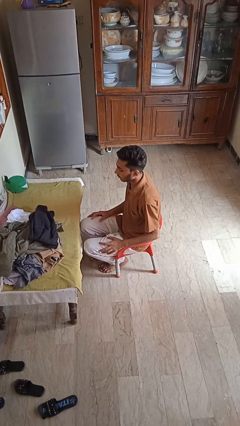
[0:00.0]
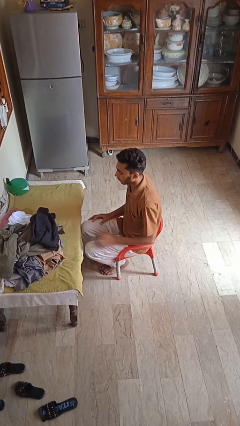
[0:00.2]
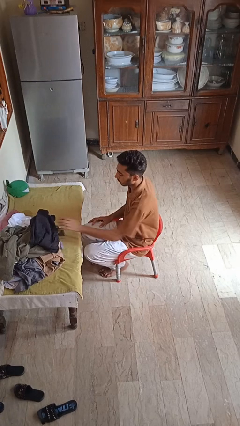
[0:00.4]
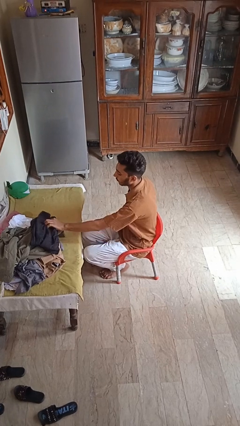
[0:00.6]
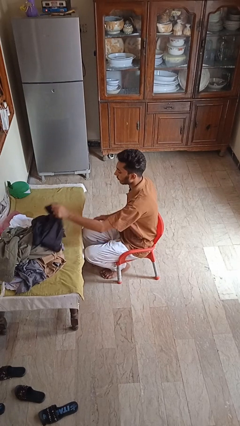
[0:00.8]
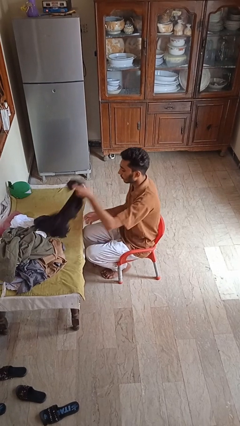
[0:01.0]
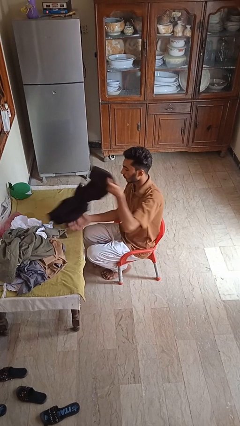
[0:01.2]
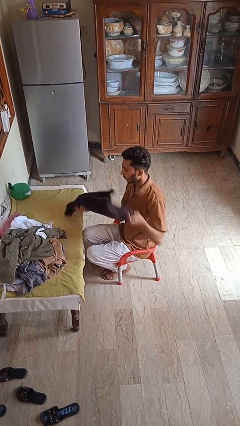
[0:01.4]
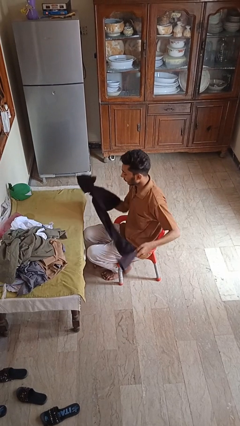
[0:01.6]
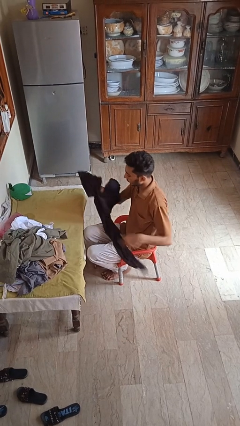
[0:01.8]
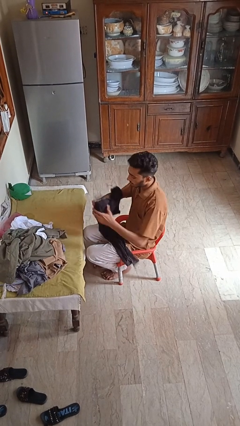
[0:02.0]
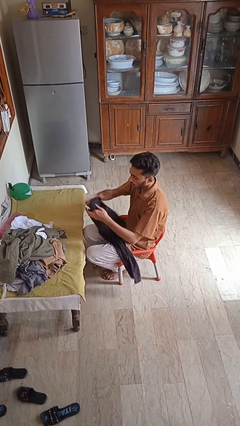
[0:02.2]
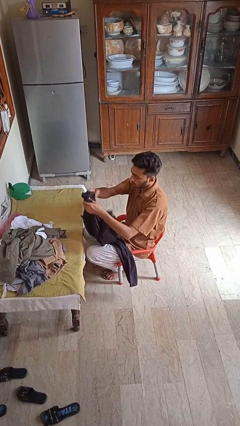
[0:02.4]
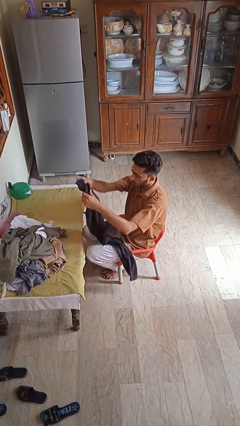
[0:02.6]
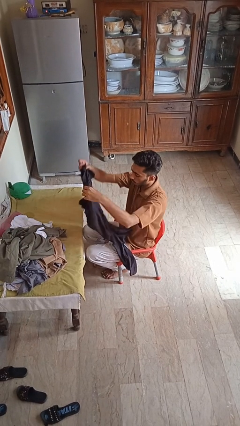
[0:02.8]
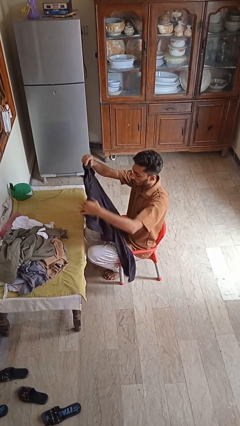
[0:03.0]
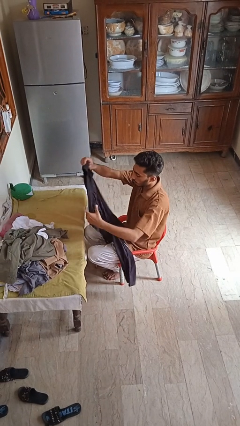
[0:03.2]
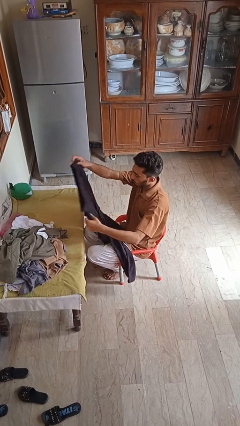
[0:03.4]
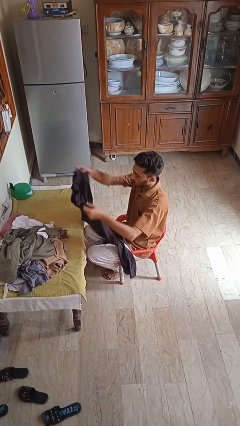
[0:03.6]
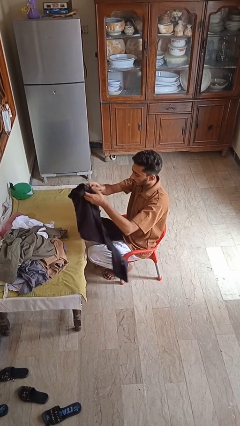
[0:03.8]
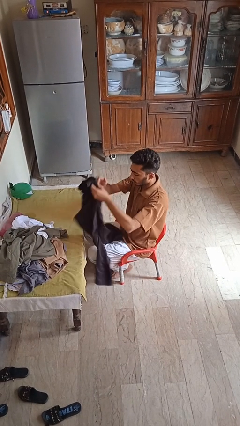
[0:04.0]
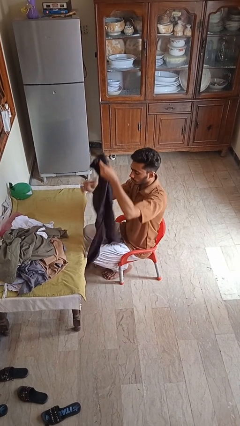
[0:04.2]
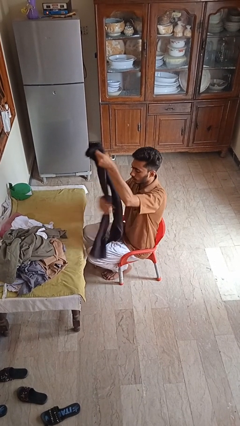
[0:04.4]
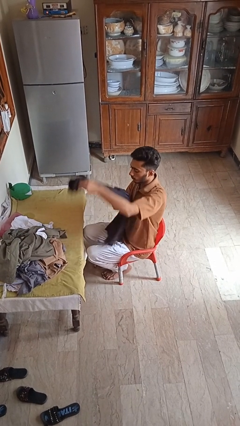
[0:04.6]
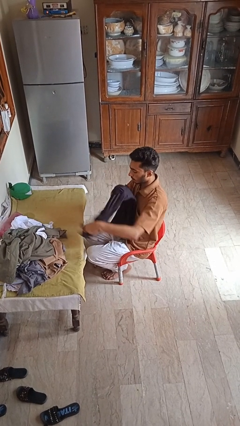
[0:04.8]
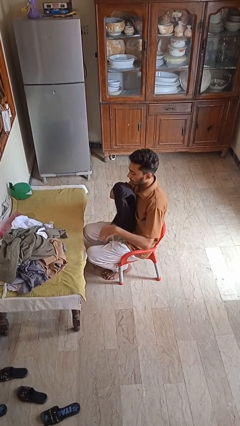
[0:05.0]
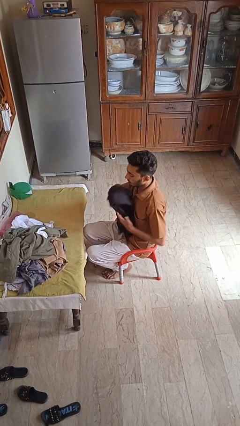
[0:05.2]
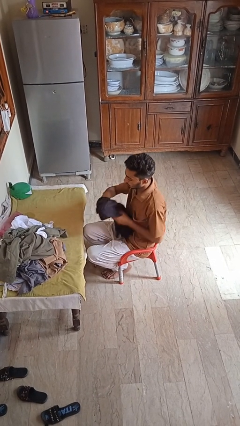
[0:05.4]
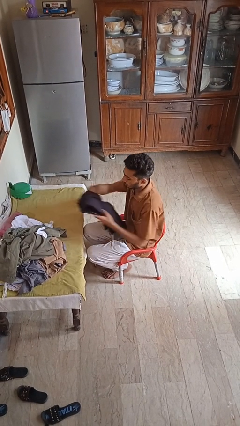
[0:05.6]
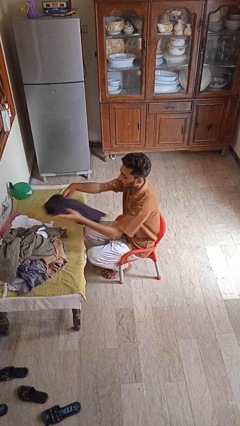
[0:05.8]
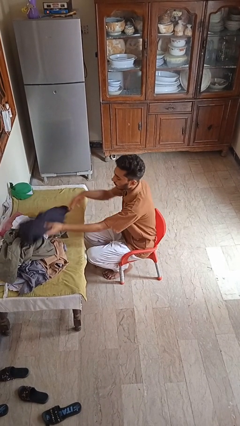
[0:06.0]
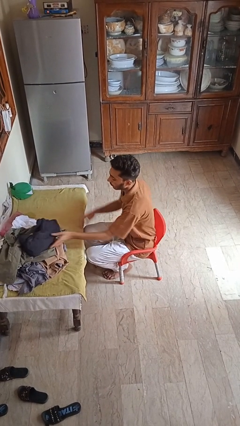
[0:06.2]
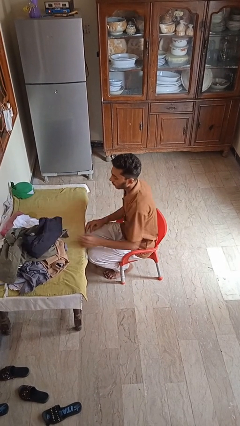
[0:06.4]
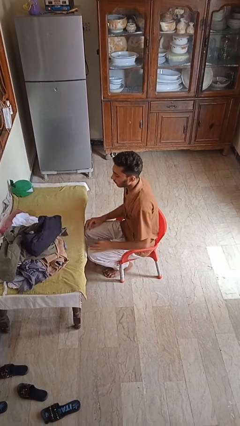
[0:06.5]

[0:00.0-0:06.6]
person folds pants

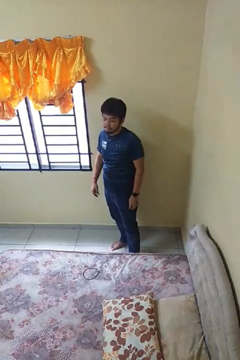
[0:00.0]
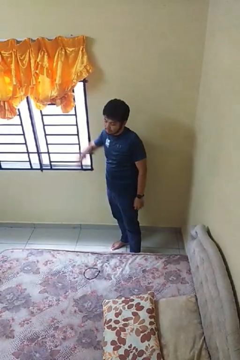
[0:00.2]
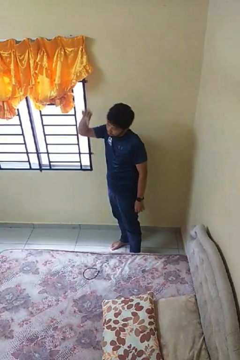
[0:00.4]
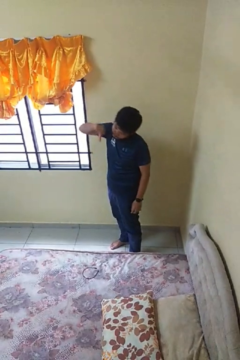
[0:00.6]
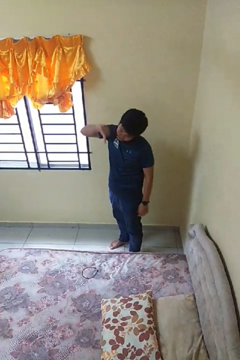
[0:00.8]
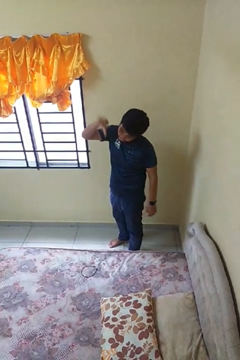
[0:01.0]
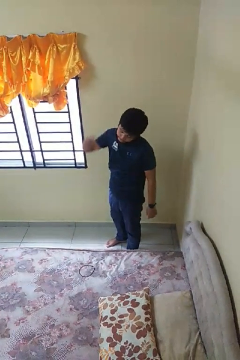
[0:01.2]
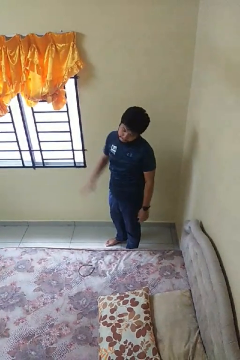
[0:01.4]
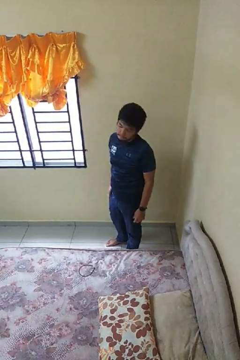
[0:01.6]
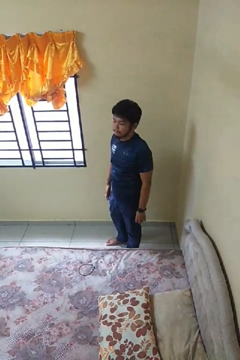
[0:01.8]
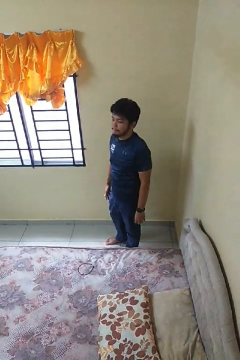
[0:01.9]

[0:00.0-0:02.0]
person gestures thumbs down

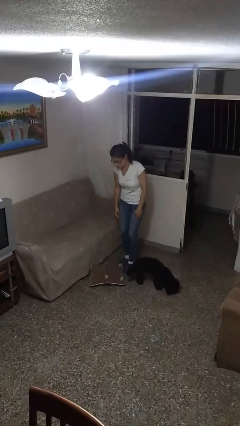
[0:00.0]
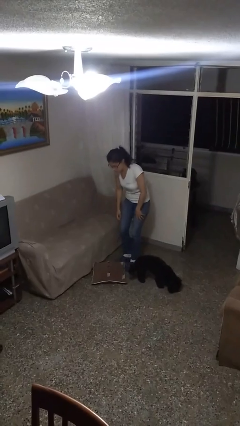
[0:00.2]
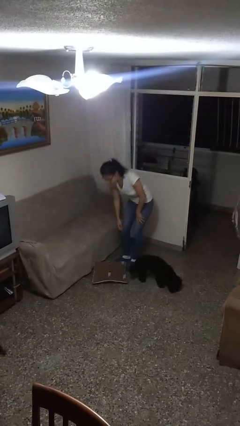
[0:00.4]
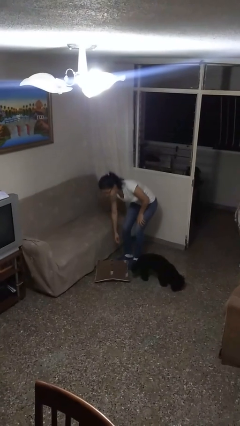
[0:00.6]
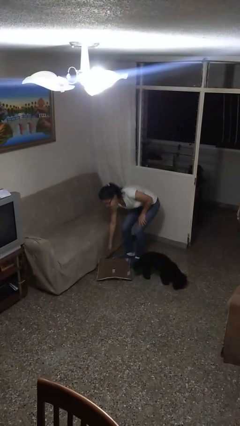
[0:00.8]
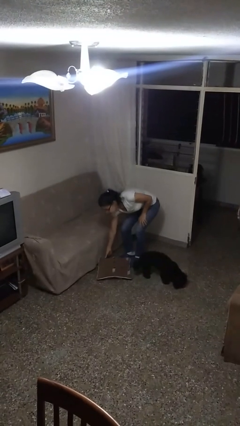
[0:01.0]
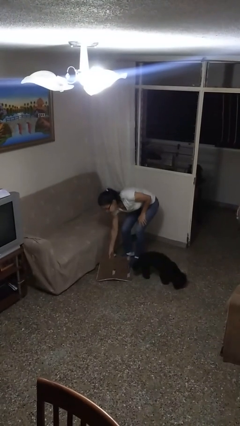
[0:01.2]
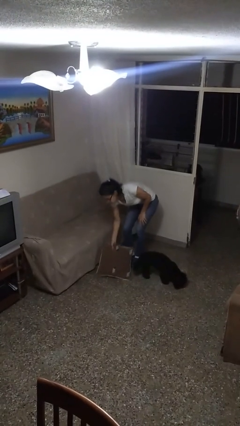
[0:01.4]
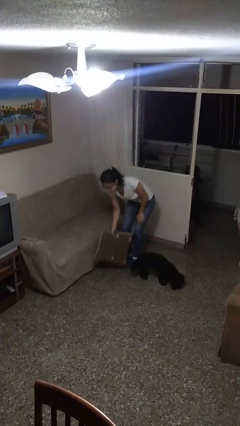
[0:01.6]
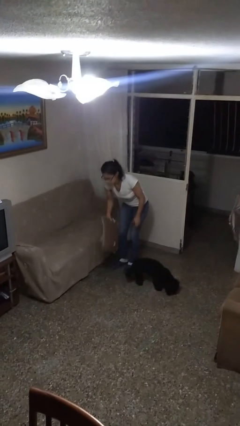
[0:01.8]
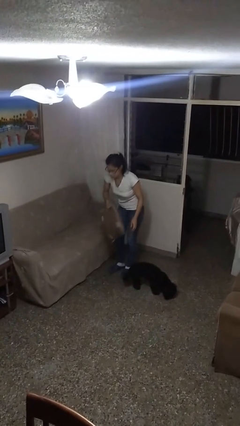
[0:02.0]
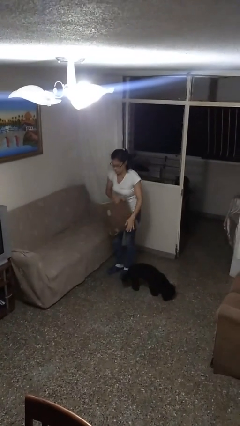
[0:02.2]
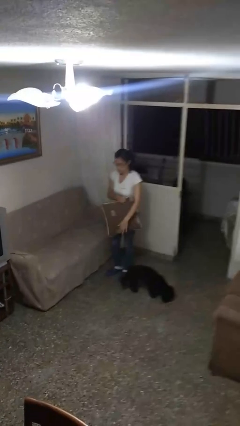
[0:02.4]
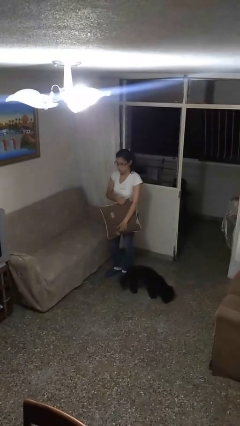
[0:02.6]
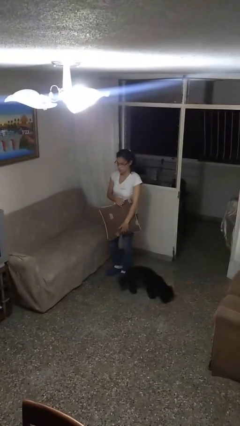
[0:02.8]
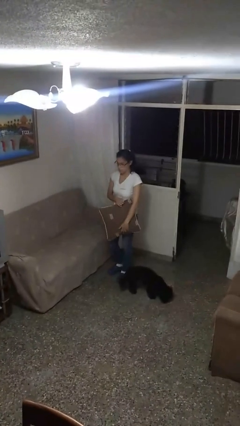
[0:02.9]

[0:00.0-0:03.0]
person picks up object from floor

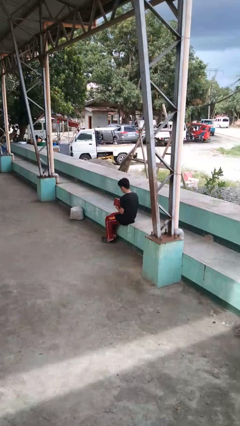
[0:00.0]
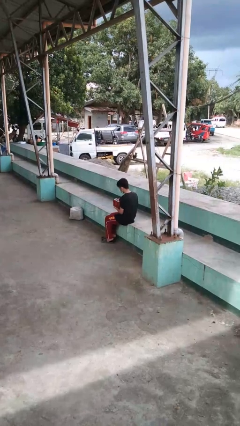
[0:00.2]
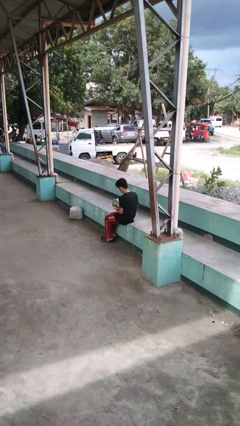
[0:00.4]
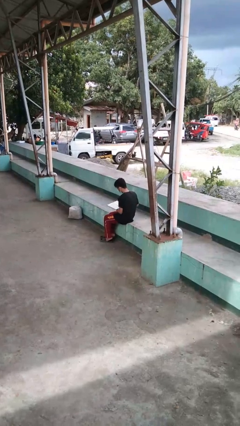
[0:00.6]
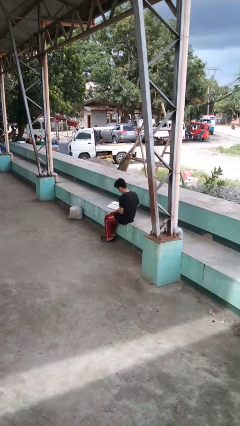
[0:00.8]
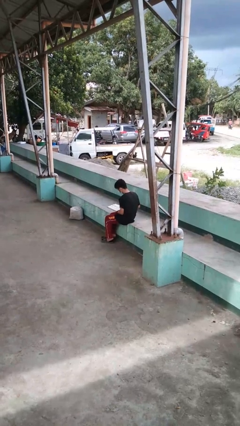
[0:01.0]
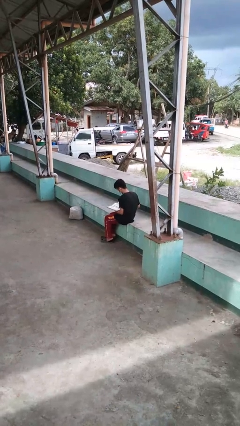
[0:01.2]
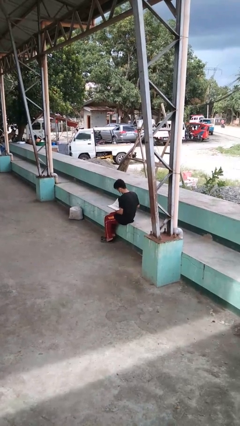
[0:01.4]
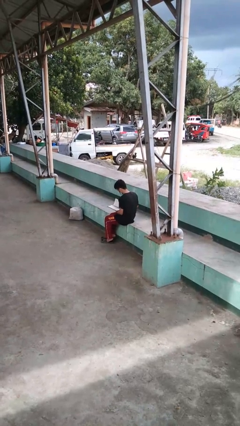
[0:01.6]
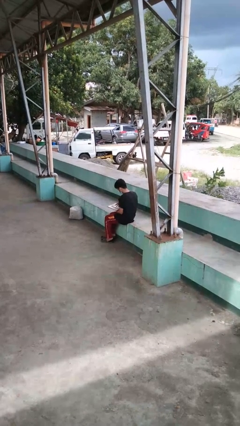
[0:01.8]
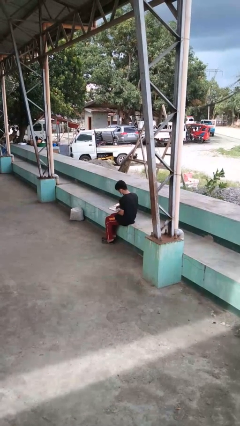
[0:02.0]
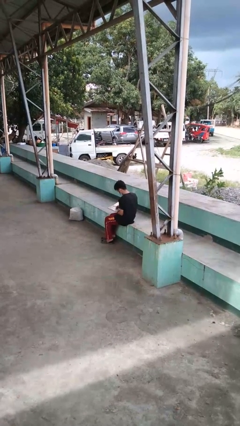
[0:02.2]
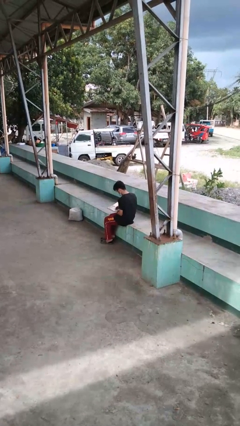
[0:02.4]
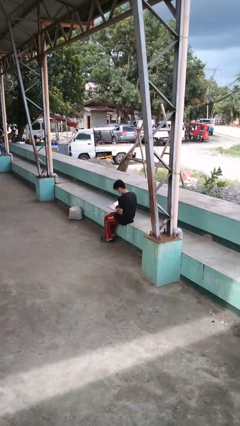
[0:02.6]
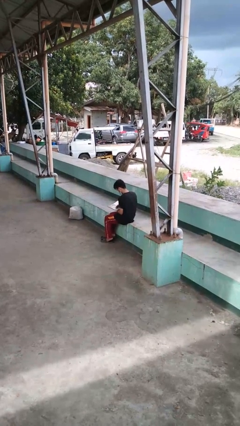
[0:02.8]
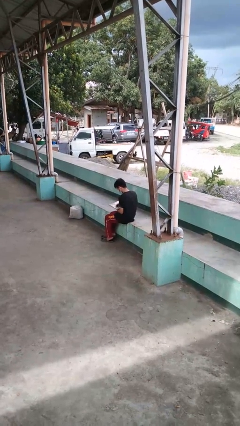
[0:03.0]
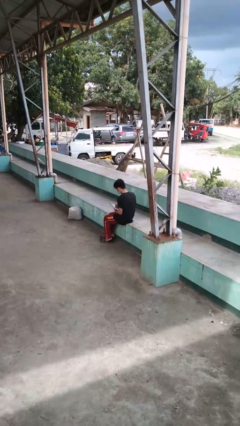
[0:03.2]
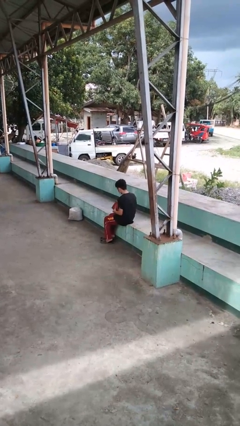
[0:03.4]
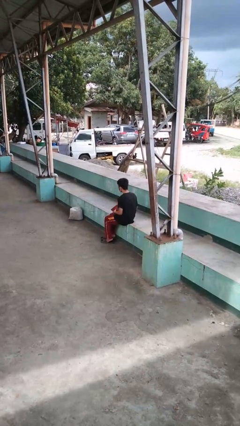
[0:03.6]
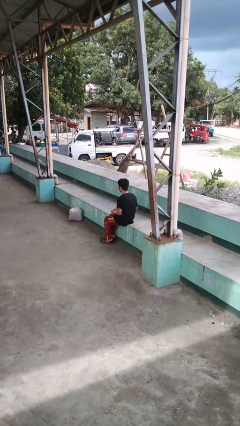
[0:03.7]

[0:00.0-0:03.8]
person reads book

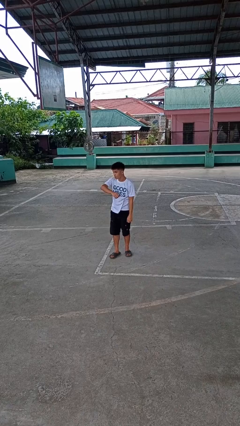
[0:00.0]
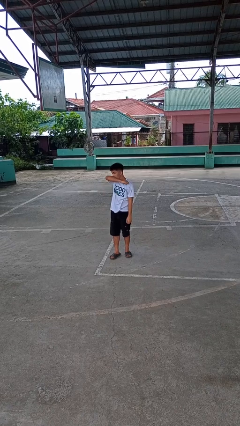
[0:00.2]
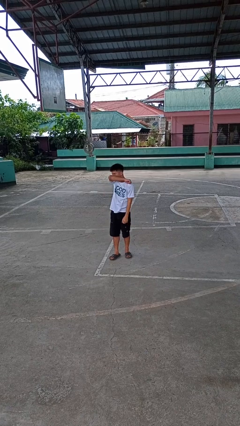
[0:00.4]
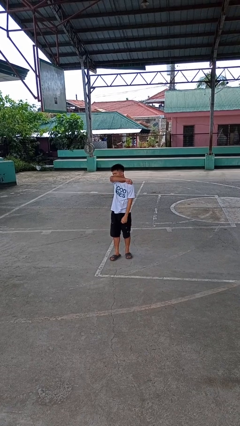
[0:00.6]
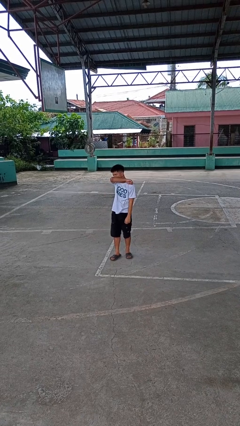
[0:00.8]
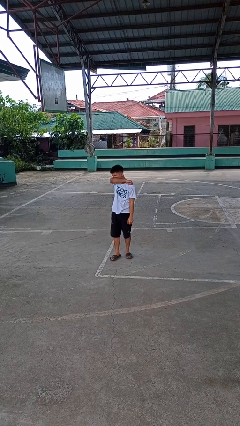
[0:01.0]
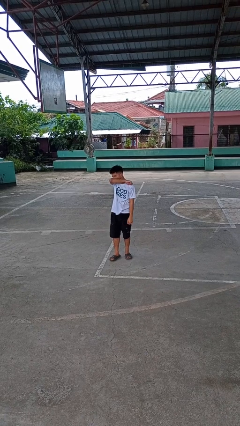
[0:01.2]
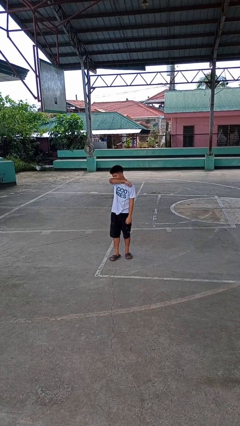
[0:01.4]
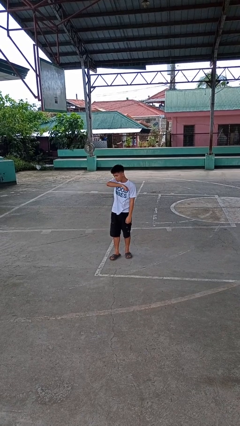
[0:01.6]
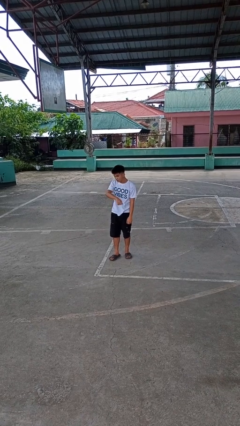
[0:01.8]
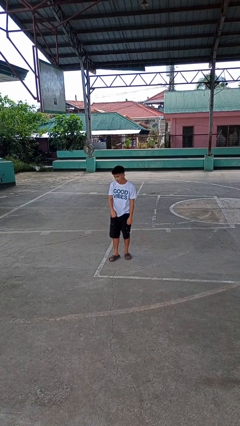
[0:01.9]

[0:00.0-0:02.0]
person sneezes into arm

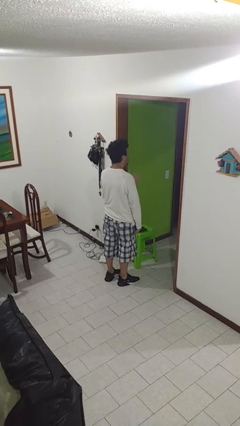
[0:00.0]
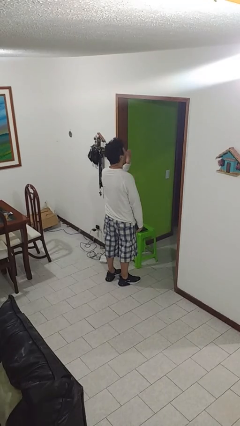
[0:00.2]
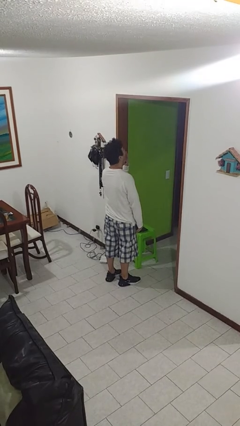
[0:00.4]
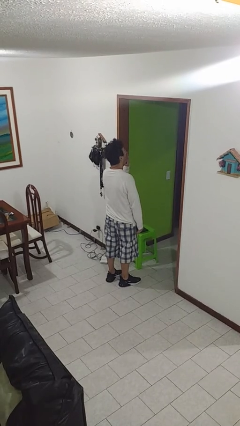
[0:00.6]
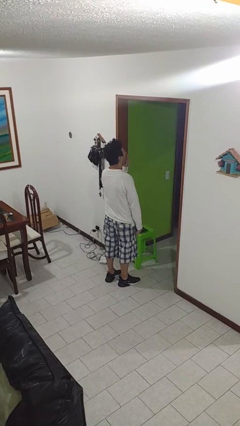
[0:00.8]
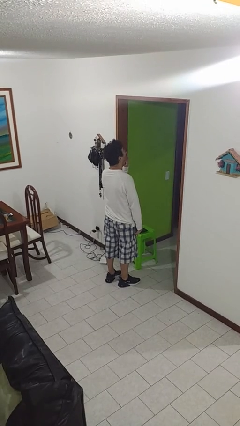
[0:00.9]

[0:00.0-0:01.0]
person yawns
